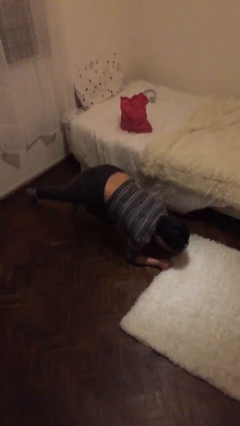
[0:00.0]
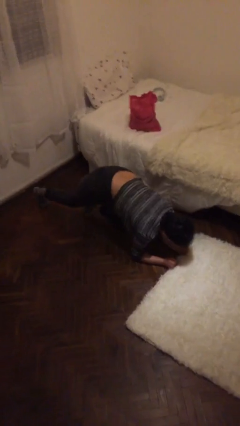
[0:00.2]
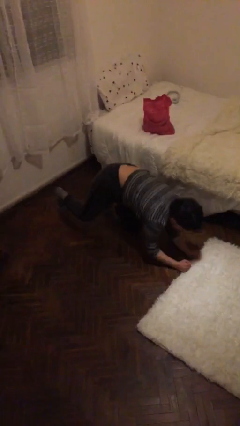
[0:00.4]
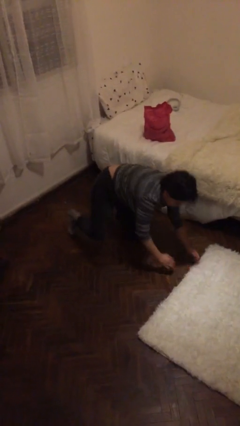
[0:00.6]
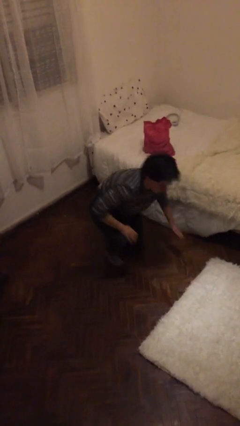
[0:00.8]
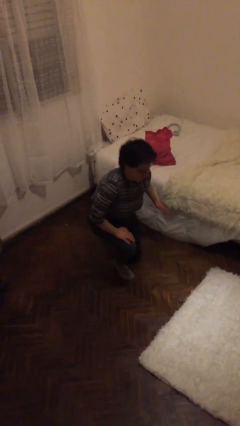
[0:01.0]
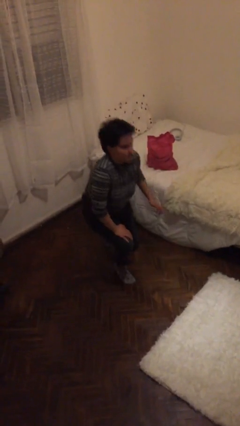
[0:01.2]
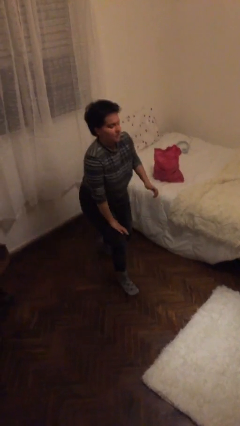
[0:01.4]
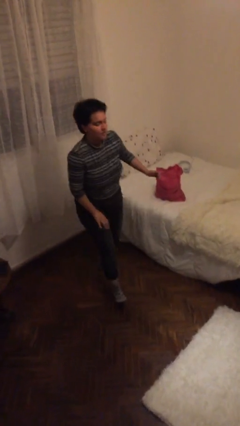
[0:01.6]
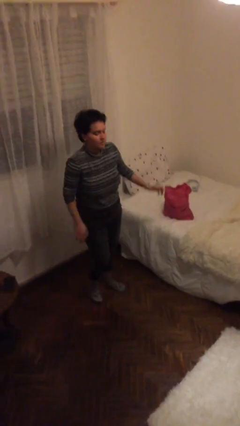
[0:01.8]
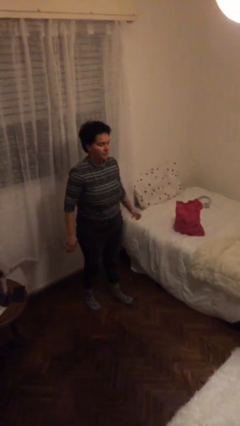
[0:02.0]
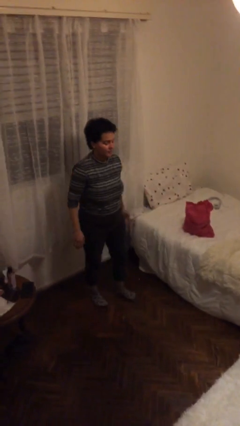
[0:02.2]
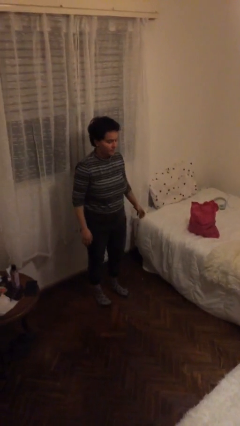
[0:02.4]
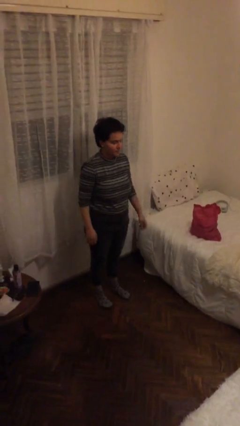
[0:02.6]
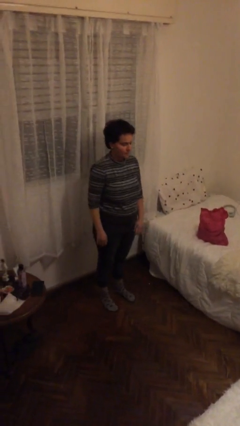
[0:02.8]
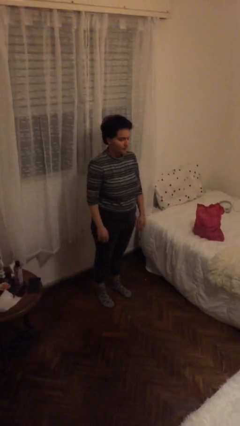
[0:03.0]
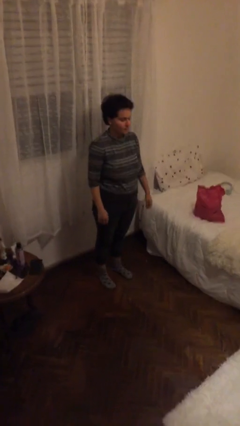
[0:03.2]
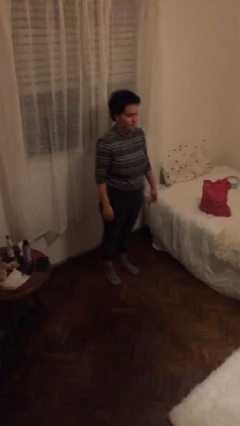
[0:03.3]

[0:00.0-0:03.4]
person stands up from floor

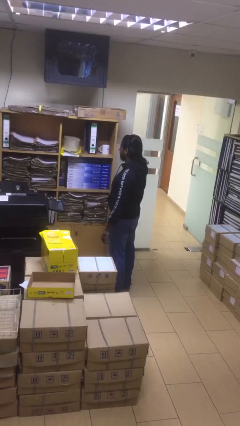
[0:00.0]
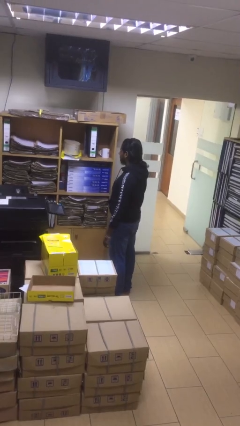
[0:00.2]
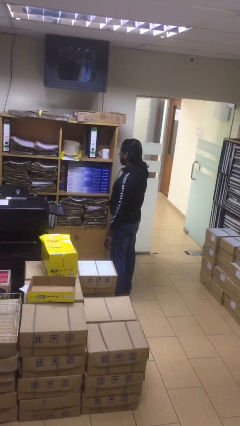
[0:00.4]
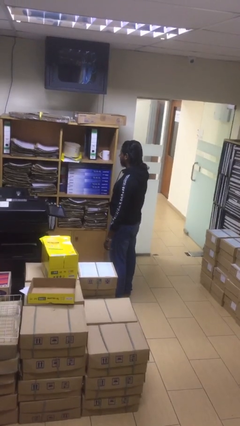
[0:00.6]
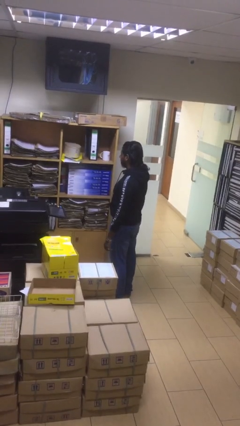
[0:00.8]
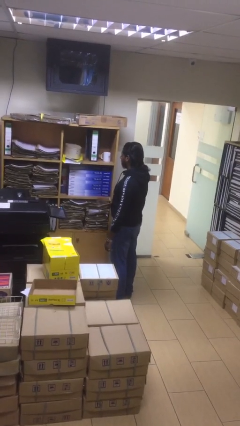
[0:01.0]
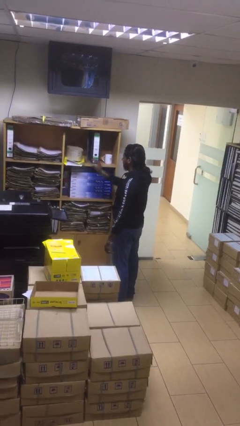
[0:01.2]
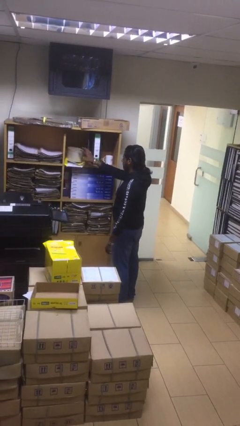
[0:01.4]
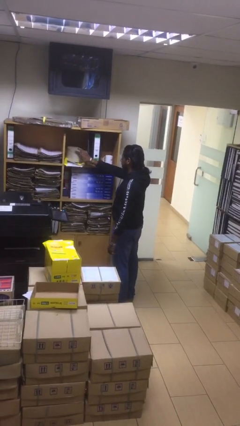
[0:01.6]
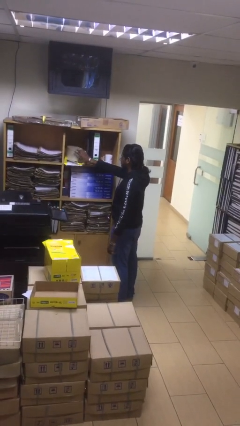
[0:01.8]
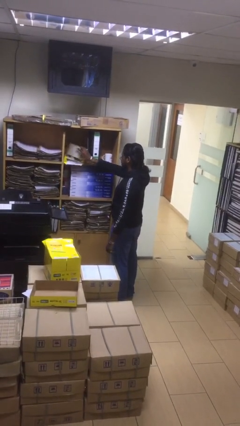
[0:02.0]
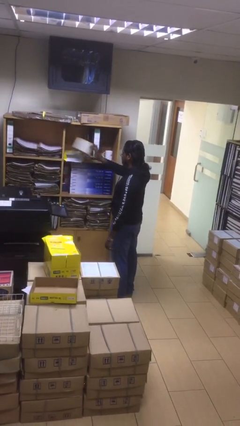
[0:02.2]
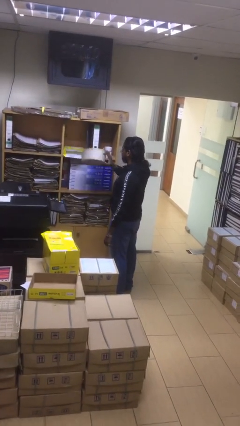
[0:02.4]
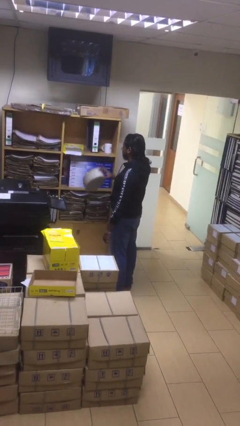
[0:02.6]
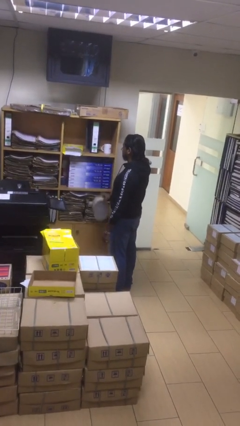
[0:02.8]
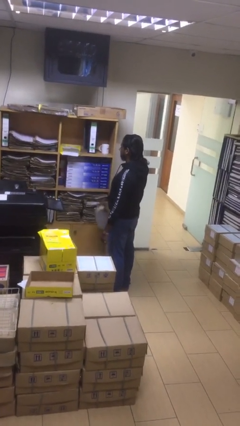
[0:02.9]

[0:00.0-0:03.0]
person picks up object from cabinet

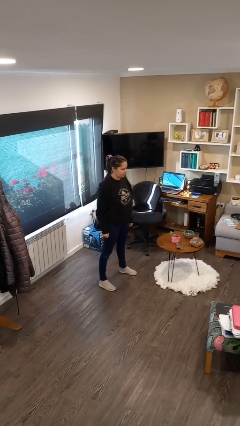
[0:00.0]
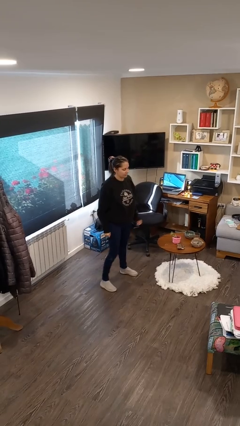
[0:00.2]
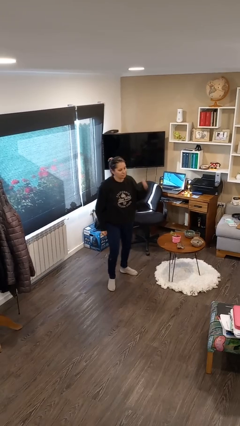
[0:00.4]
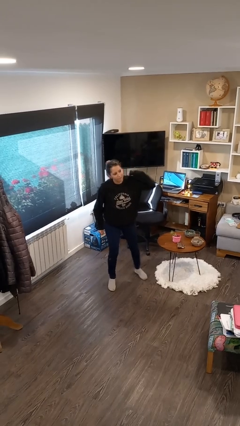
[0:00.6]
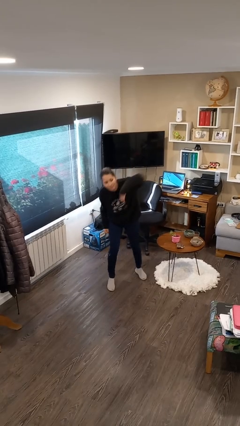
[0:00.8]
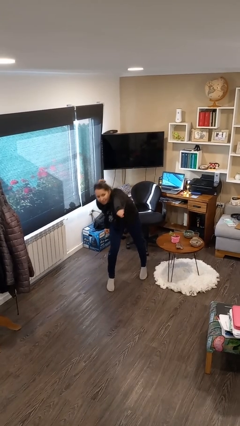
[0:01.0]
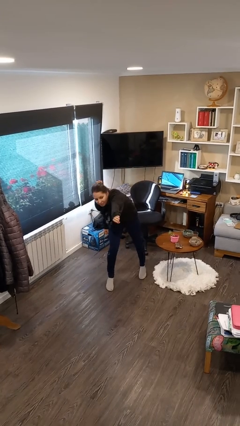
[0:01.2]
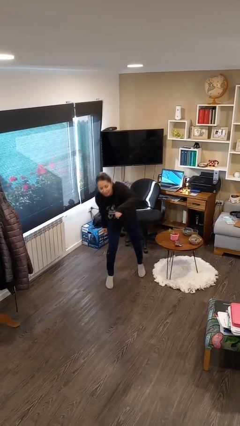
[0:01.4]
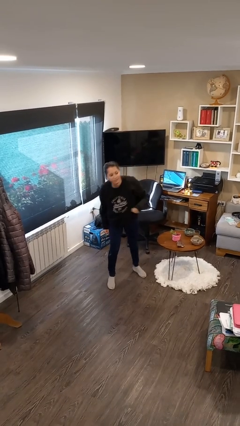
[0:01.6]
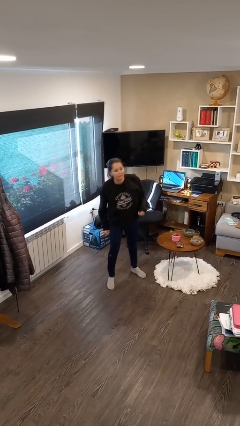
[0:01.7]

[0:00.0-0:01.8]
person punches

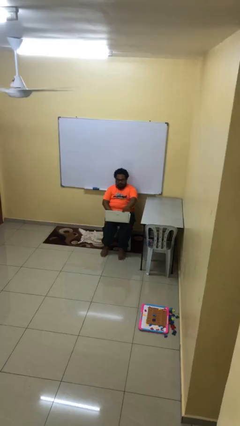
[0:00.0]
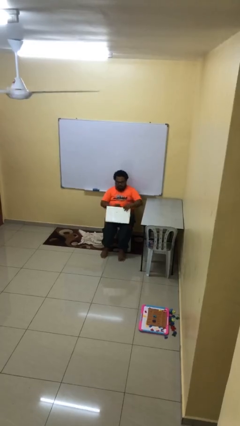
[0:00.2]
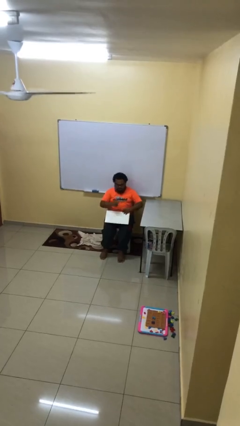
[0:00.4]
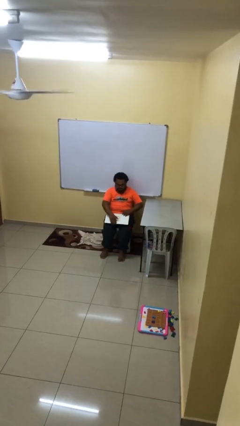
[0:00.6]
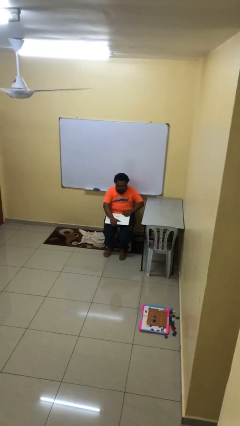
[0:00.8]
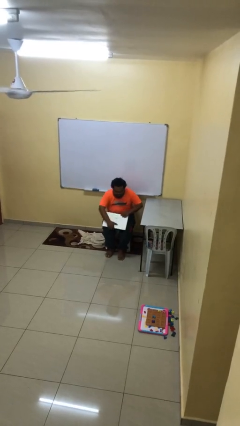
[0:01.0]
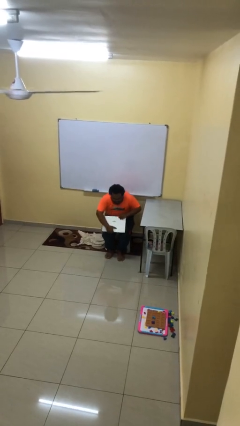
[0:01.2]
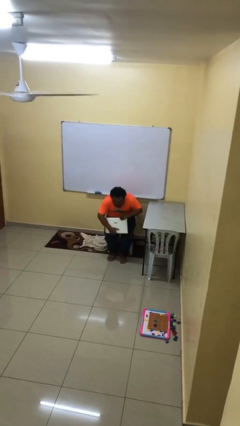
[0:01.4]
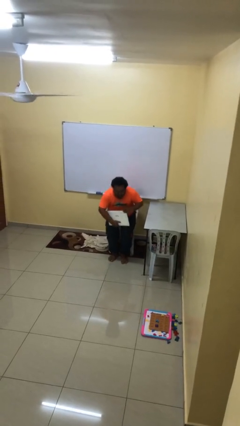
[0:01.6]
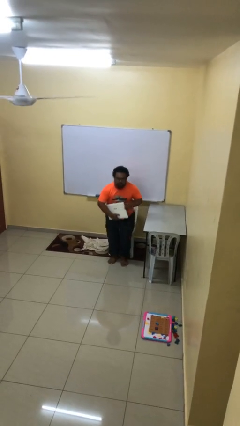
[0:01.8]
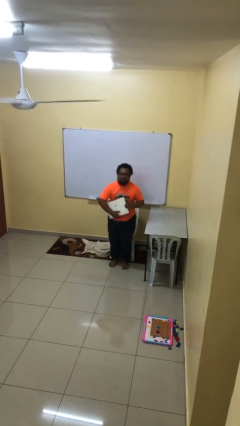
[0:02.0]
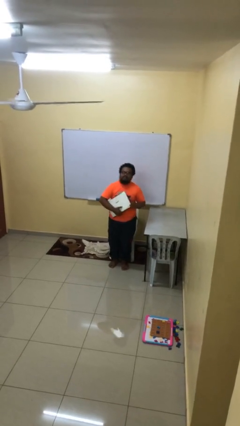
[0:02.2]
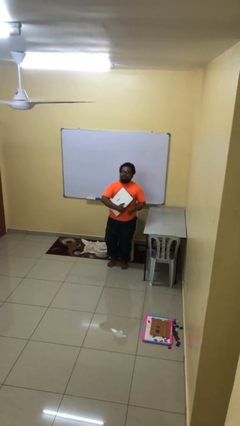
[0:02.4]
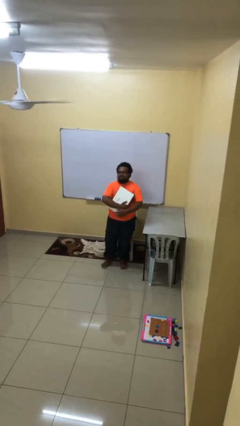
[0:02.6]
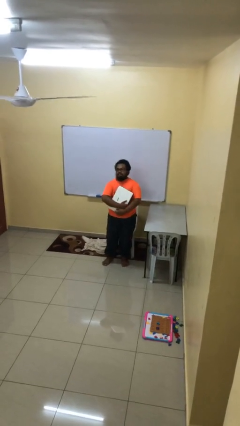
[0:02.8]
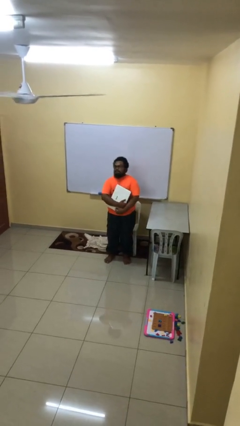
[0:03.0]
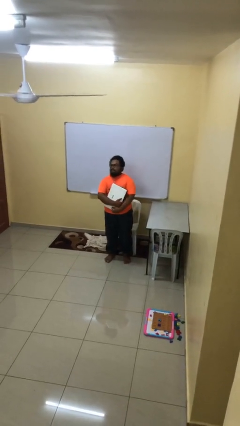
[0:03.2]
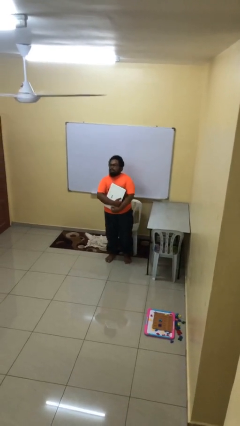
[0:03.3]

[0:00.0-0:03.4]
person stands up

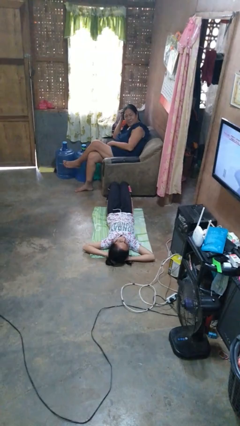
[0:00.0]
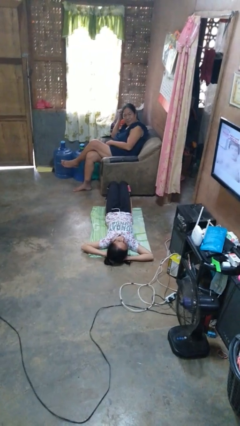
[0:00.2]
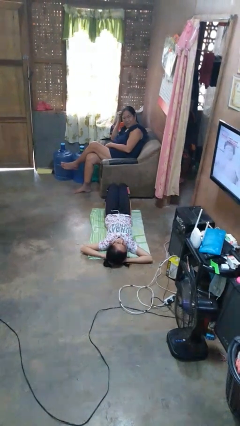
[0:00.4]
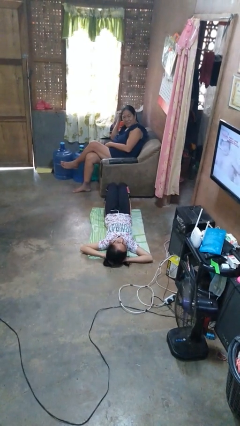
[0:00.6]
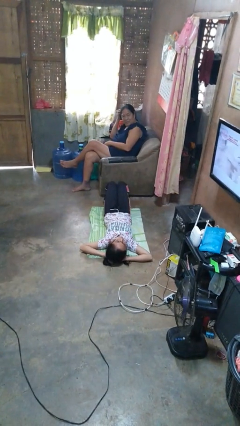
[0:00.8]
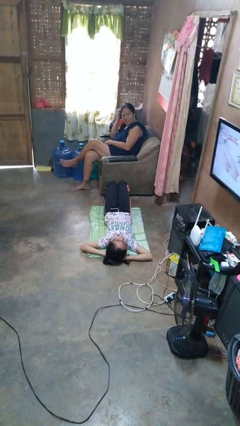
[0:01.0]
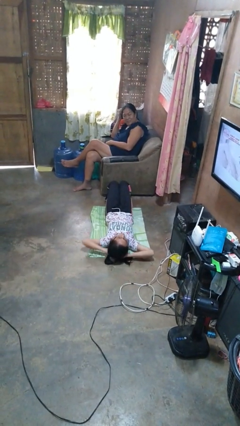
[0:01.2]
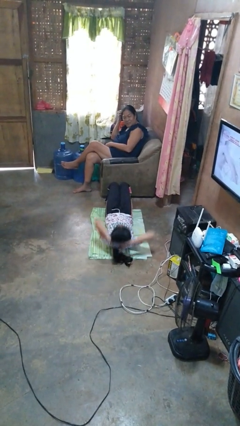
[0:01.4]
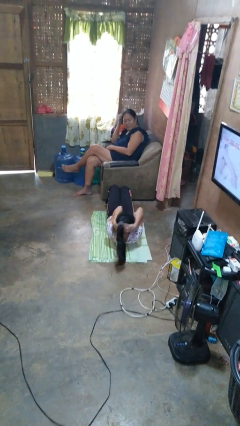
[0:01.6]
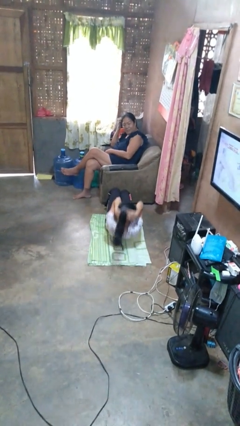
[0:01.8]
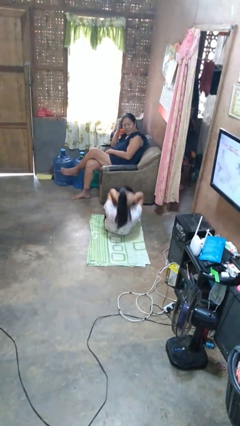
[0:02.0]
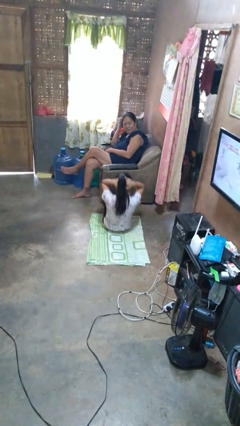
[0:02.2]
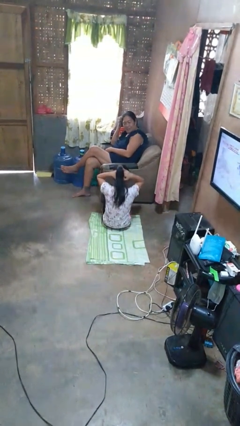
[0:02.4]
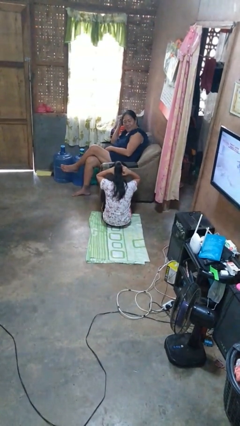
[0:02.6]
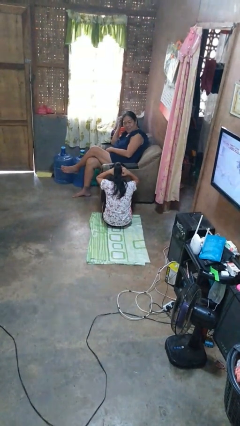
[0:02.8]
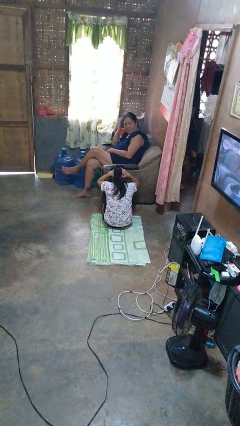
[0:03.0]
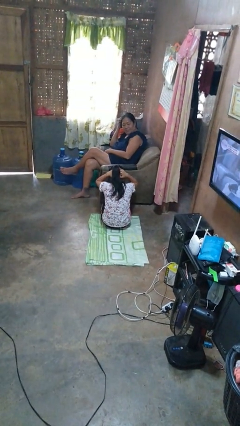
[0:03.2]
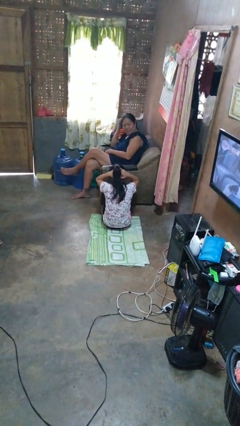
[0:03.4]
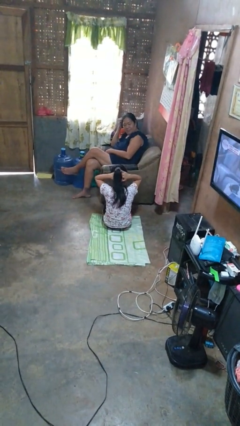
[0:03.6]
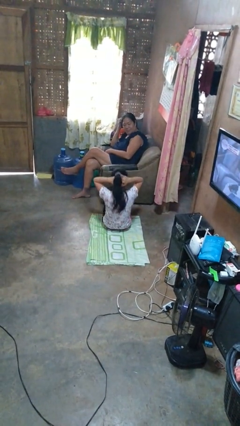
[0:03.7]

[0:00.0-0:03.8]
person exercises with situp

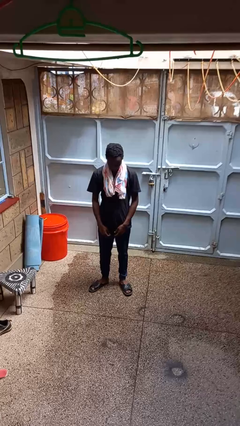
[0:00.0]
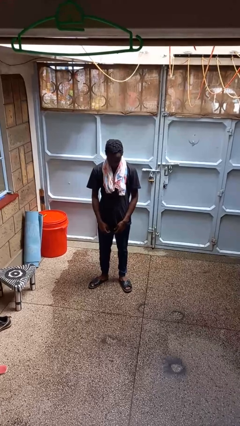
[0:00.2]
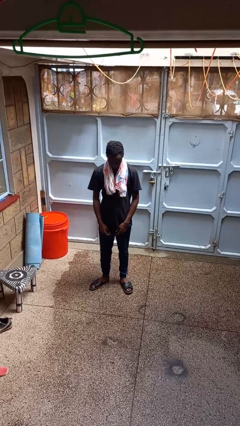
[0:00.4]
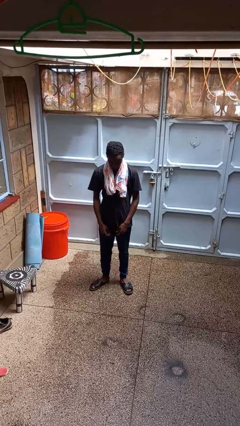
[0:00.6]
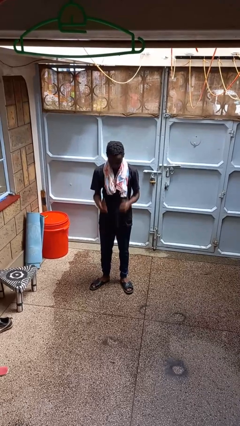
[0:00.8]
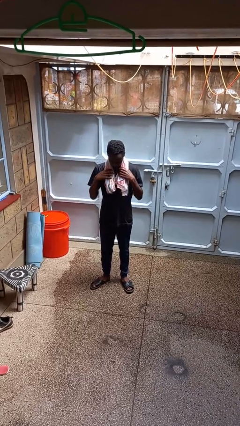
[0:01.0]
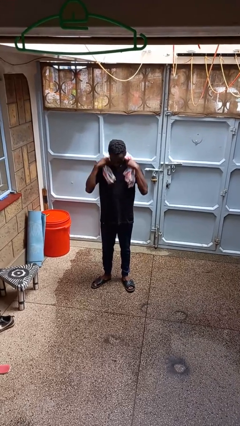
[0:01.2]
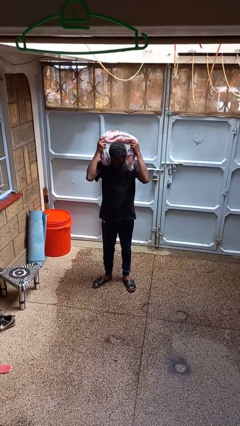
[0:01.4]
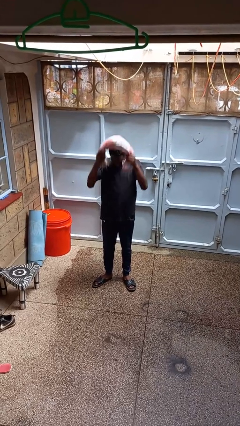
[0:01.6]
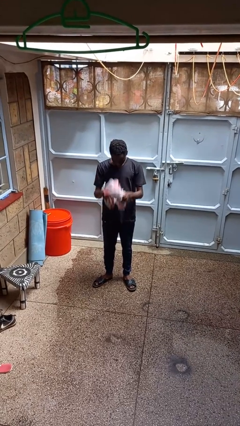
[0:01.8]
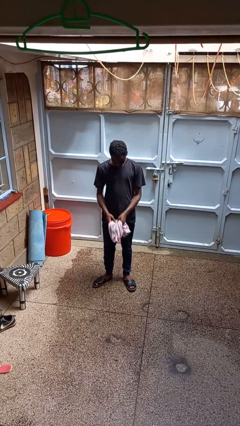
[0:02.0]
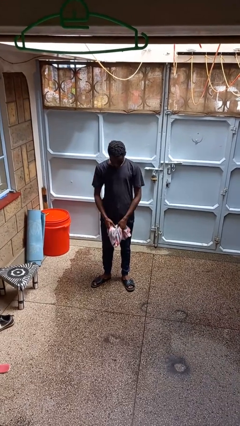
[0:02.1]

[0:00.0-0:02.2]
person takes off scarf
